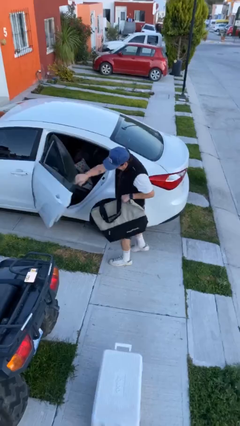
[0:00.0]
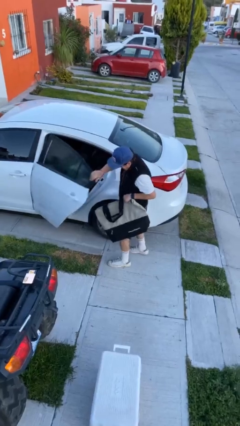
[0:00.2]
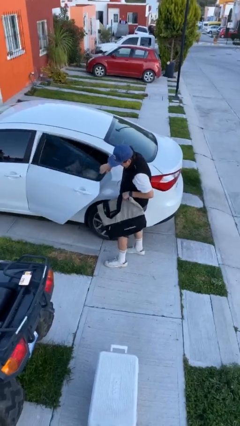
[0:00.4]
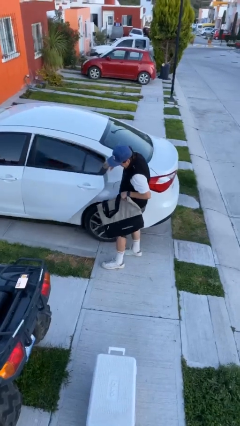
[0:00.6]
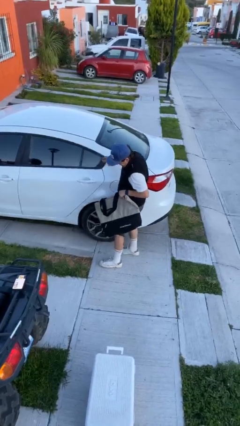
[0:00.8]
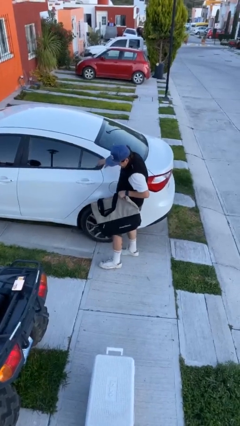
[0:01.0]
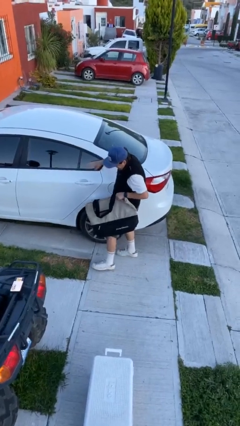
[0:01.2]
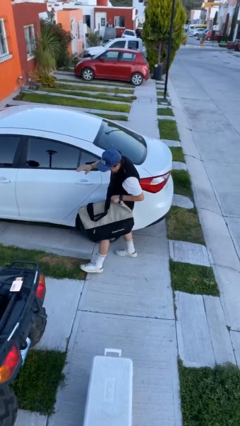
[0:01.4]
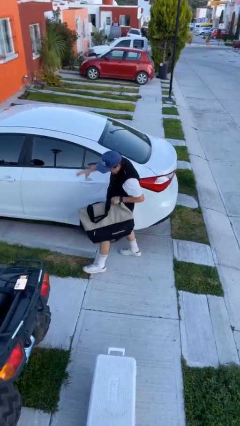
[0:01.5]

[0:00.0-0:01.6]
person closes car door

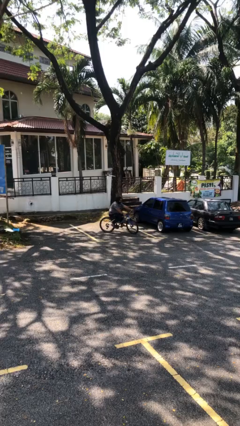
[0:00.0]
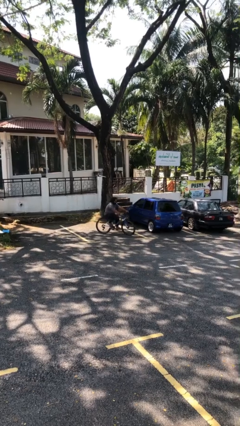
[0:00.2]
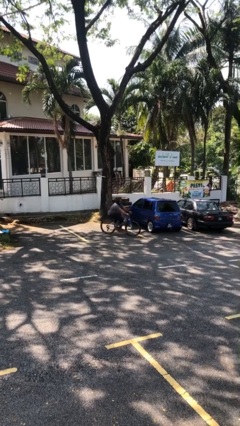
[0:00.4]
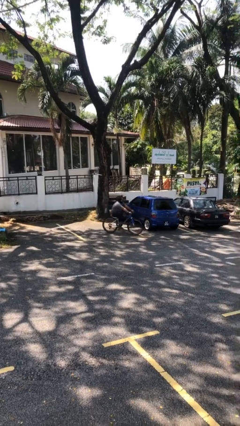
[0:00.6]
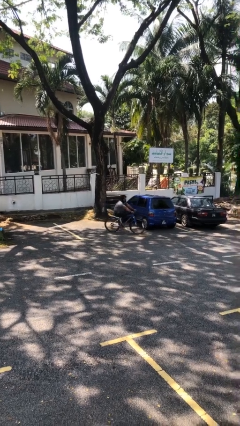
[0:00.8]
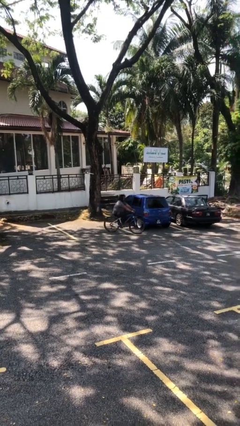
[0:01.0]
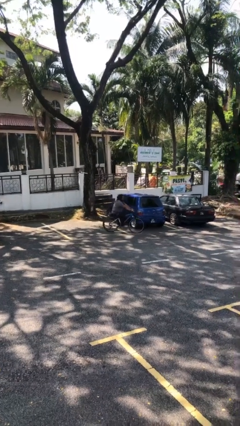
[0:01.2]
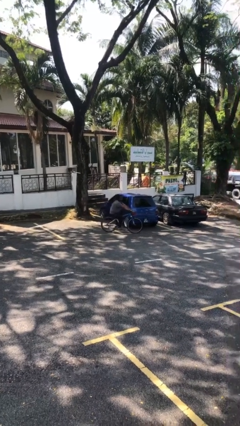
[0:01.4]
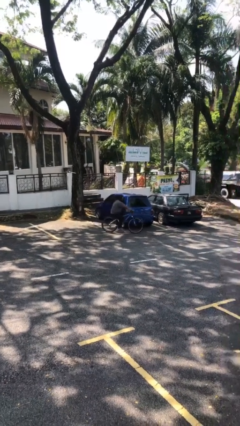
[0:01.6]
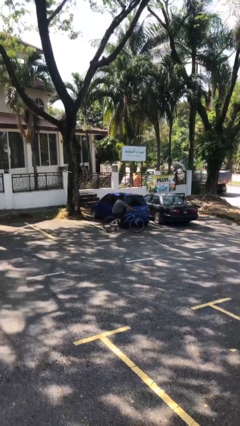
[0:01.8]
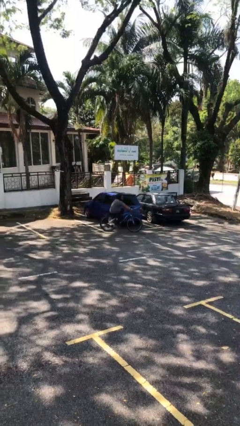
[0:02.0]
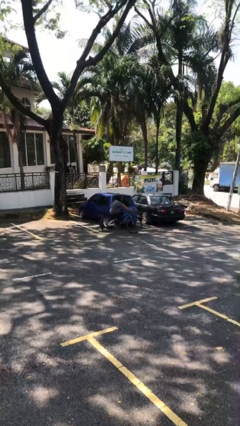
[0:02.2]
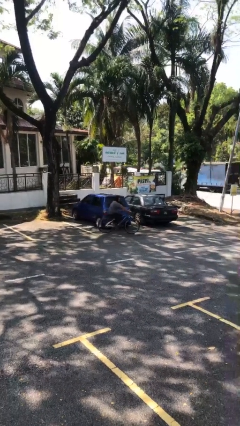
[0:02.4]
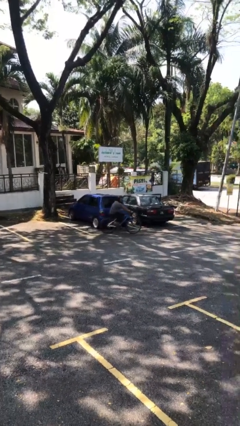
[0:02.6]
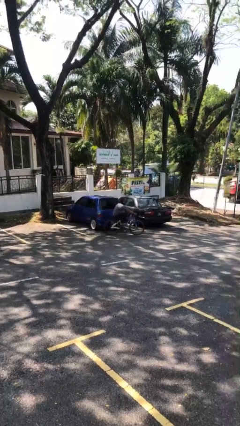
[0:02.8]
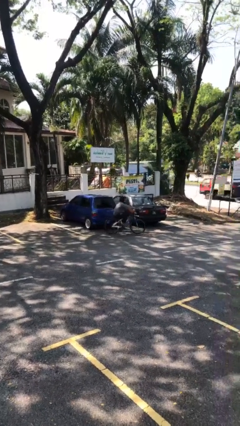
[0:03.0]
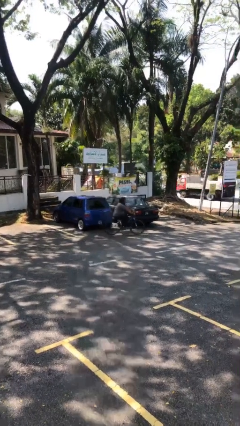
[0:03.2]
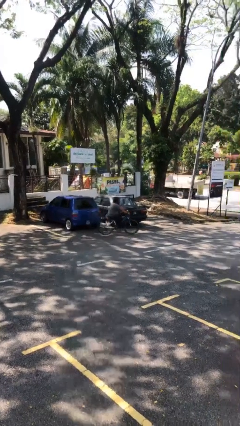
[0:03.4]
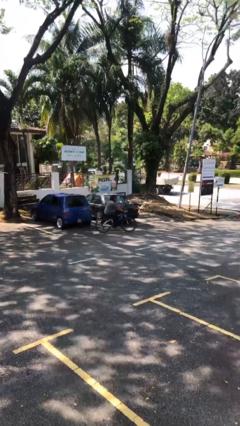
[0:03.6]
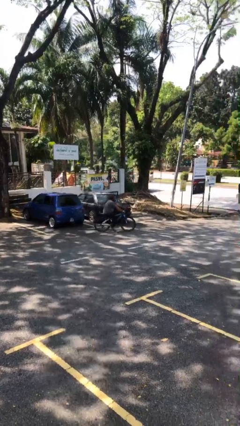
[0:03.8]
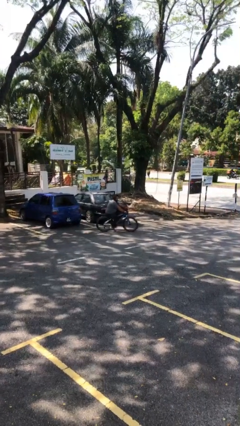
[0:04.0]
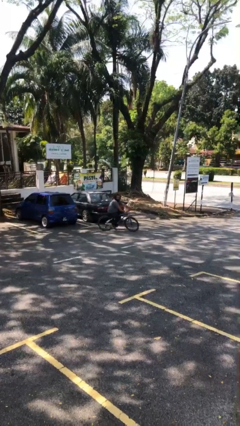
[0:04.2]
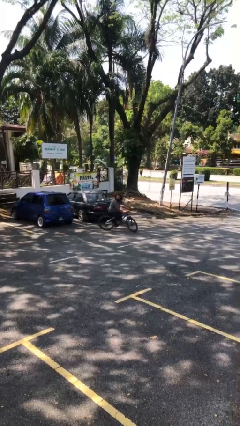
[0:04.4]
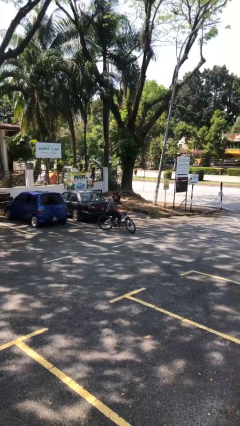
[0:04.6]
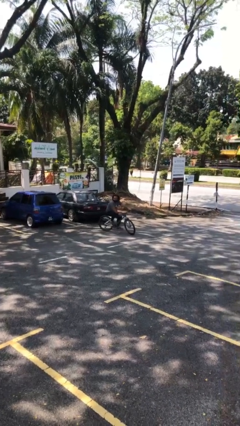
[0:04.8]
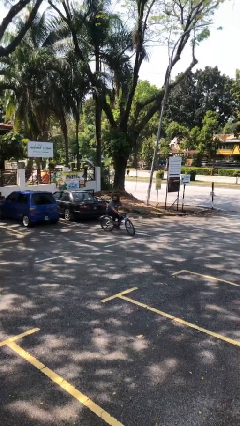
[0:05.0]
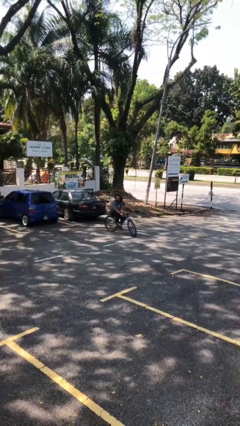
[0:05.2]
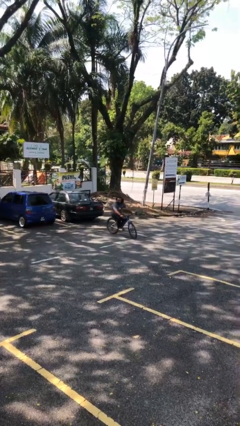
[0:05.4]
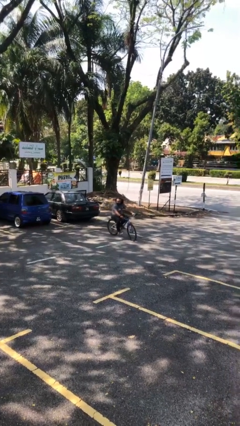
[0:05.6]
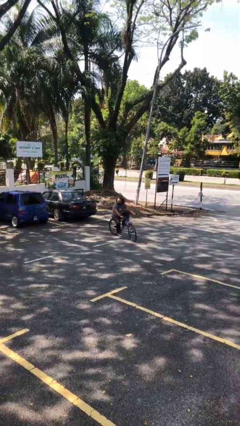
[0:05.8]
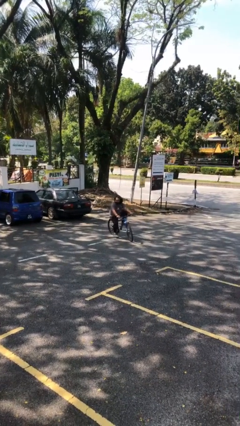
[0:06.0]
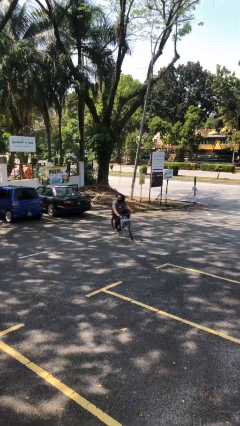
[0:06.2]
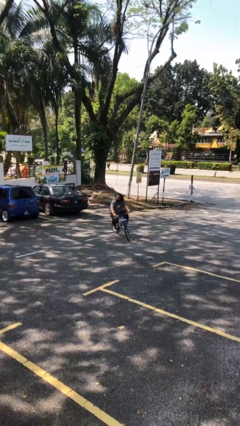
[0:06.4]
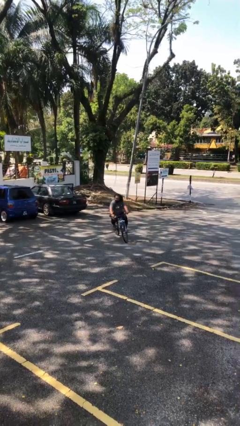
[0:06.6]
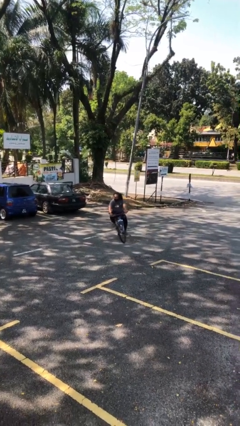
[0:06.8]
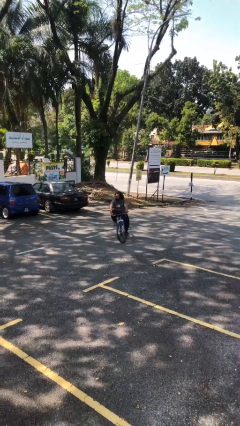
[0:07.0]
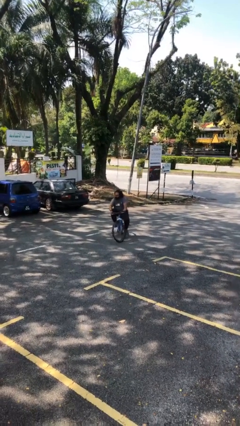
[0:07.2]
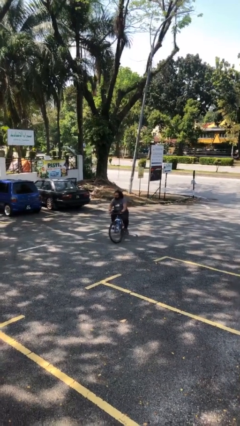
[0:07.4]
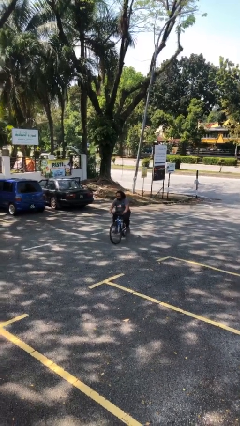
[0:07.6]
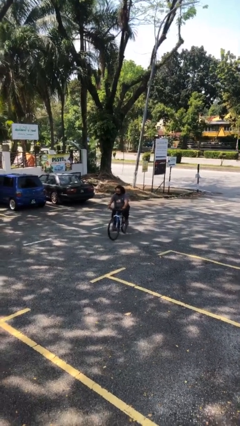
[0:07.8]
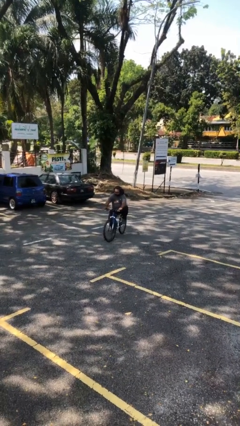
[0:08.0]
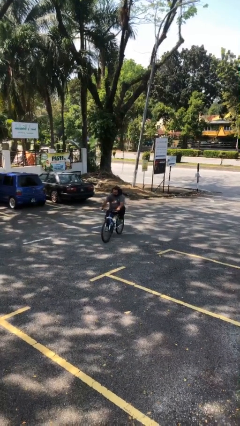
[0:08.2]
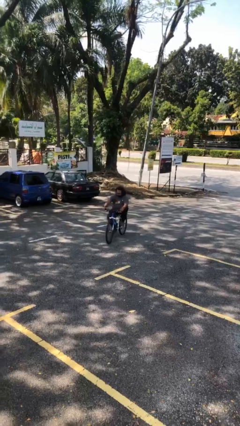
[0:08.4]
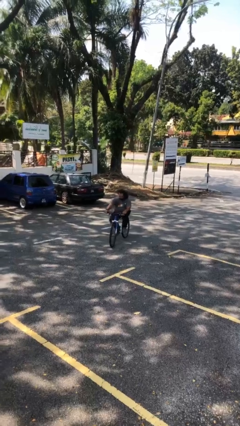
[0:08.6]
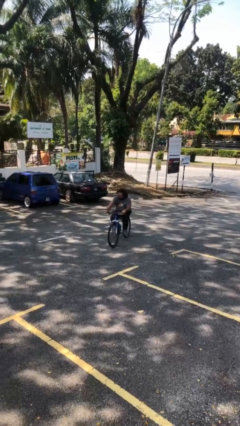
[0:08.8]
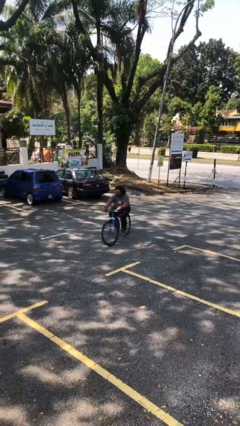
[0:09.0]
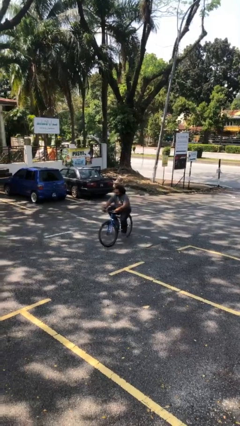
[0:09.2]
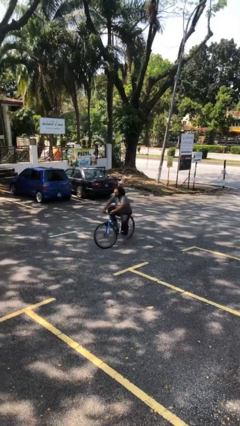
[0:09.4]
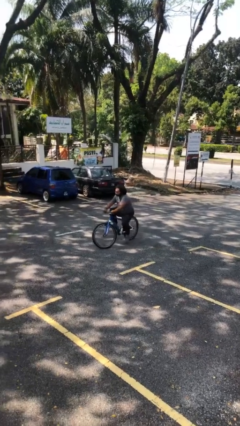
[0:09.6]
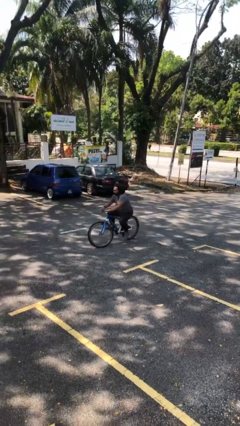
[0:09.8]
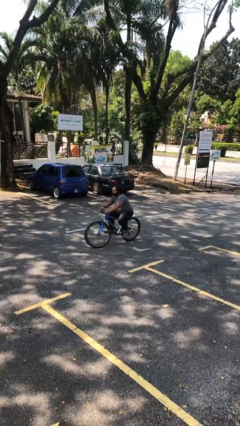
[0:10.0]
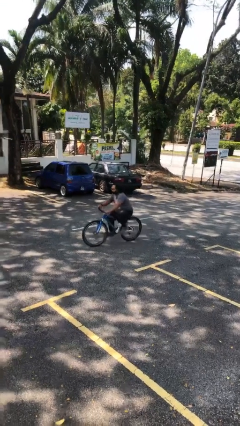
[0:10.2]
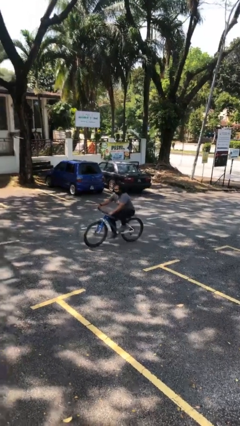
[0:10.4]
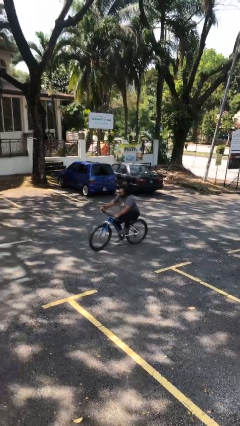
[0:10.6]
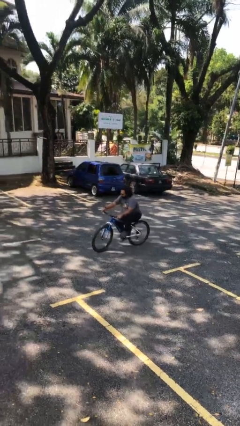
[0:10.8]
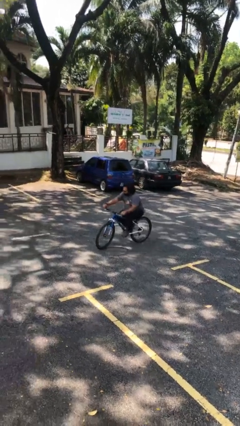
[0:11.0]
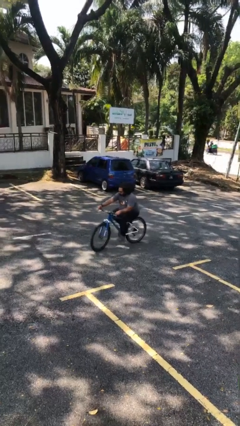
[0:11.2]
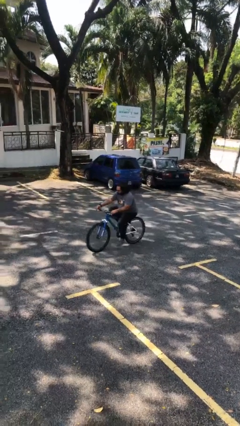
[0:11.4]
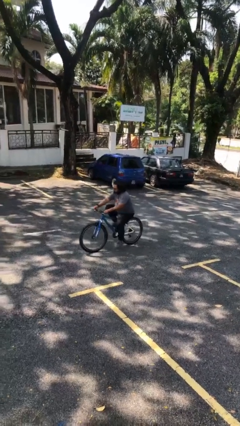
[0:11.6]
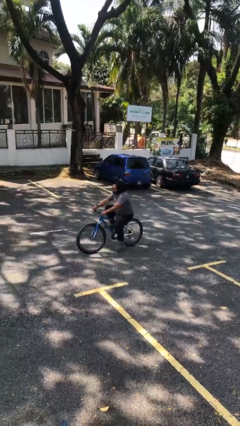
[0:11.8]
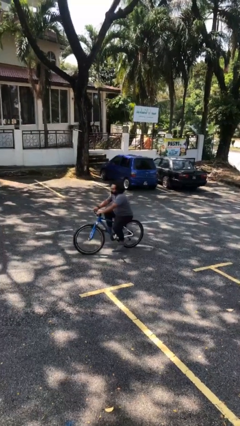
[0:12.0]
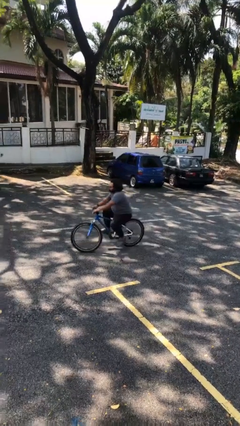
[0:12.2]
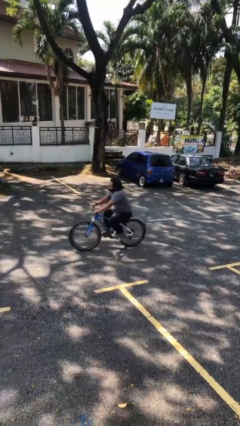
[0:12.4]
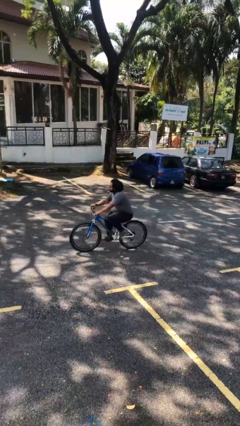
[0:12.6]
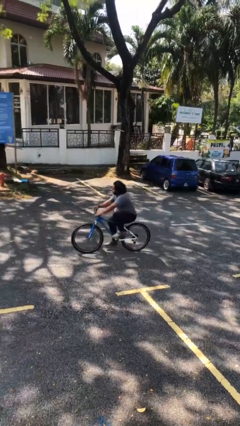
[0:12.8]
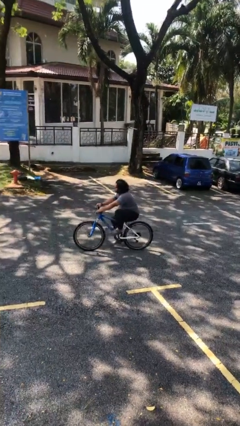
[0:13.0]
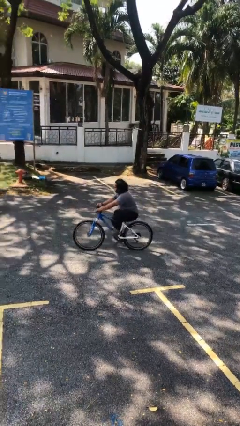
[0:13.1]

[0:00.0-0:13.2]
person rides bicycle

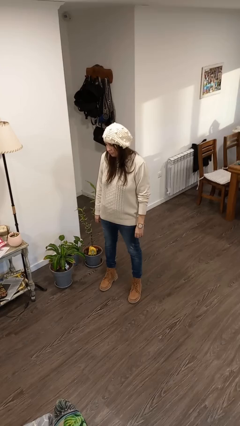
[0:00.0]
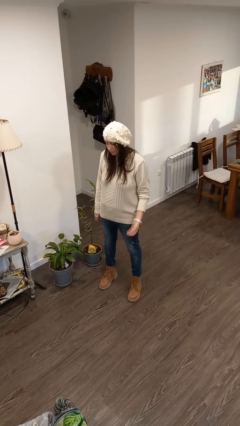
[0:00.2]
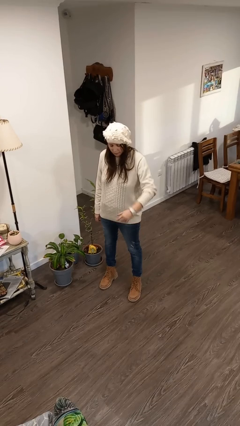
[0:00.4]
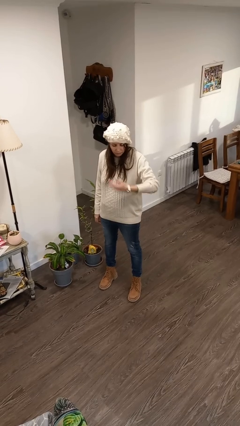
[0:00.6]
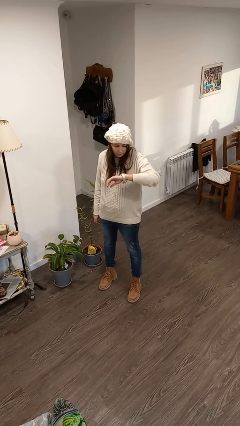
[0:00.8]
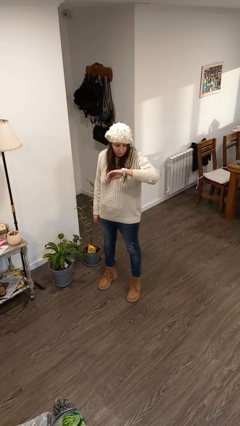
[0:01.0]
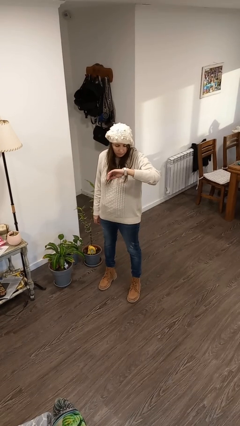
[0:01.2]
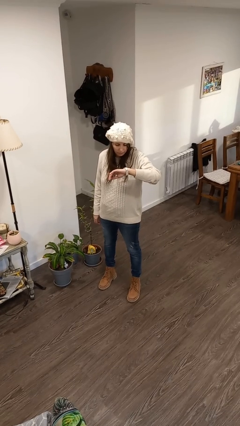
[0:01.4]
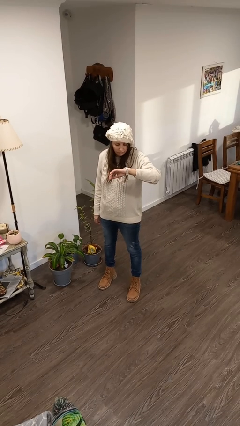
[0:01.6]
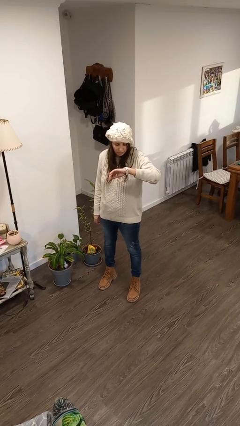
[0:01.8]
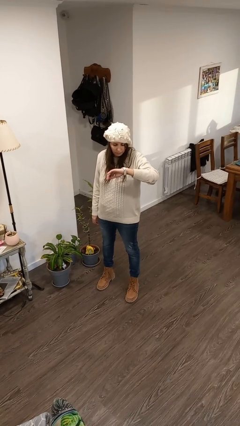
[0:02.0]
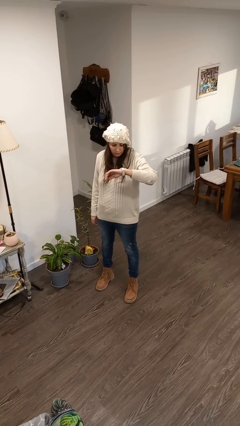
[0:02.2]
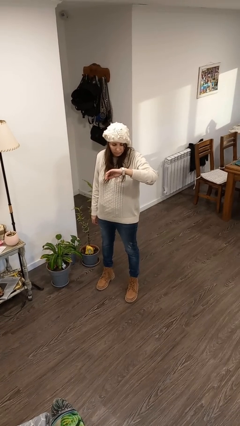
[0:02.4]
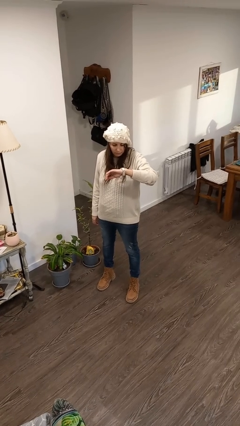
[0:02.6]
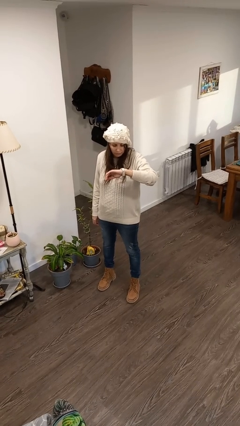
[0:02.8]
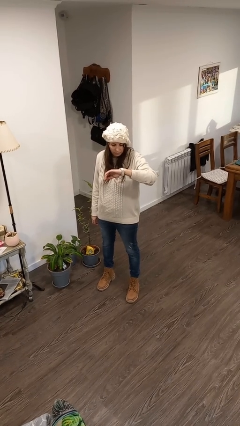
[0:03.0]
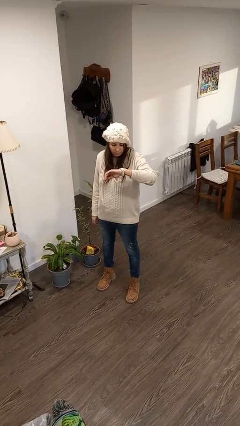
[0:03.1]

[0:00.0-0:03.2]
person looks at wristwatch

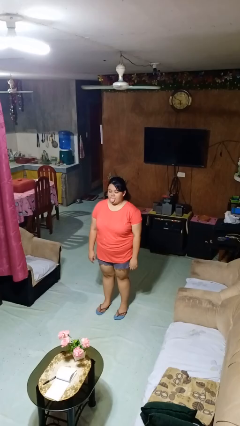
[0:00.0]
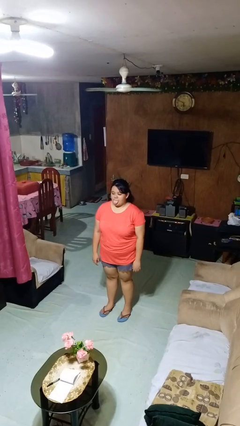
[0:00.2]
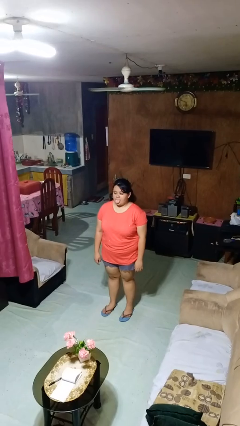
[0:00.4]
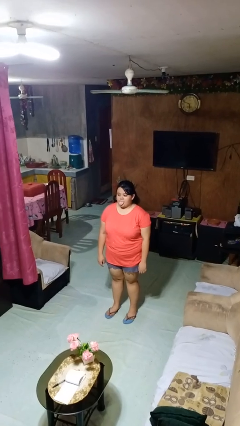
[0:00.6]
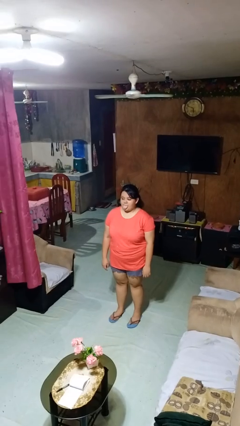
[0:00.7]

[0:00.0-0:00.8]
person sticks out tongue
